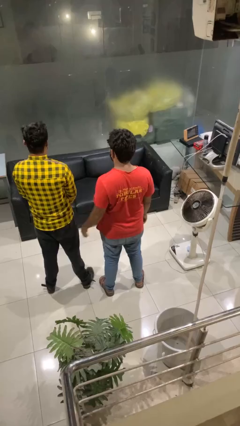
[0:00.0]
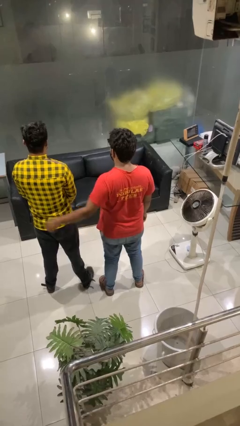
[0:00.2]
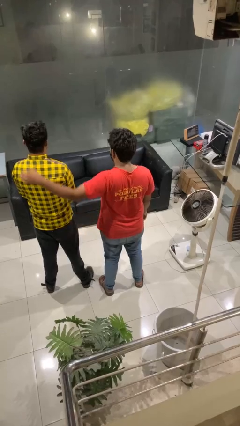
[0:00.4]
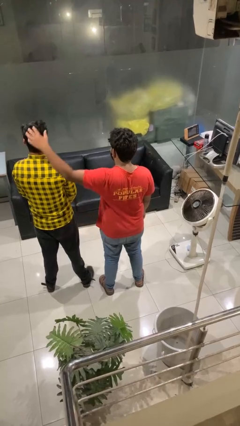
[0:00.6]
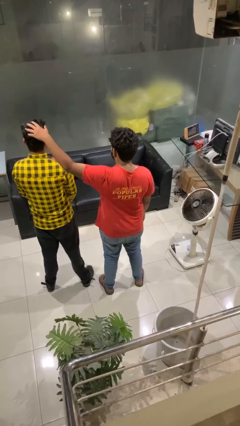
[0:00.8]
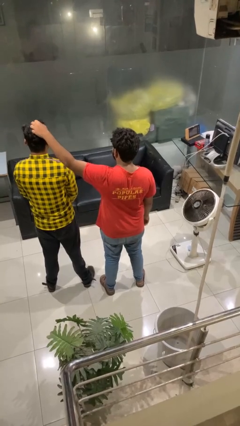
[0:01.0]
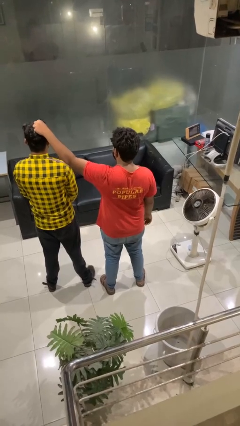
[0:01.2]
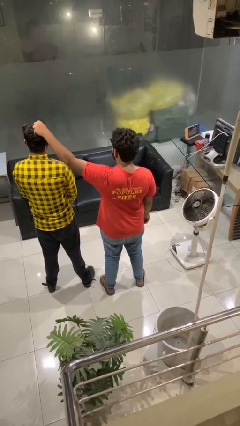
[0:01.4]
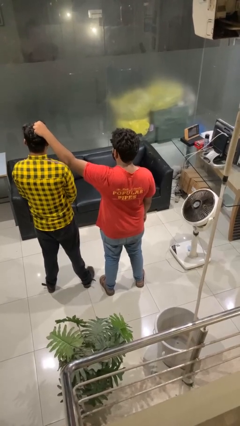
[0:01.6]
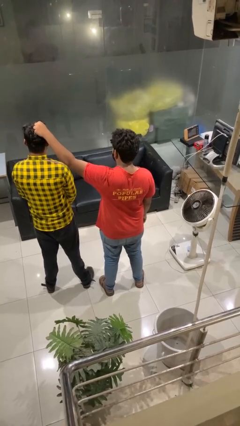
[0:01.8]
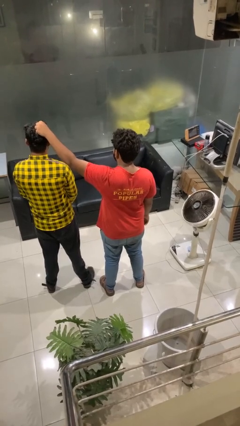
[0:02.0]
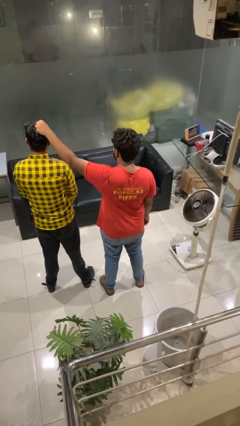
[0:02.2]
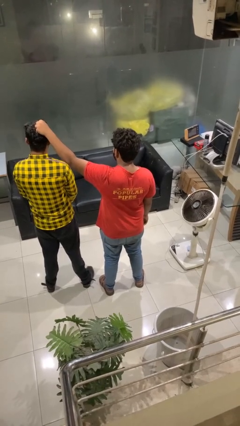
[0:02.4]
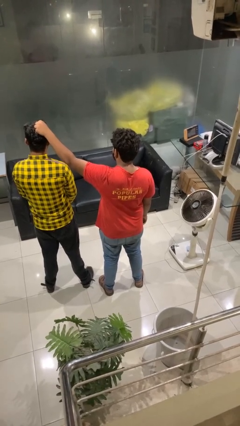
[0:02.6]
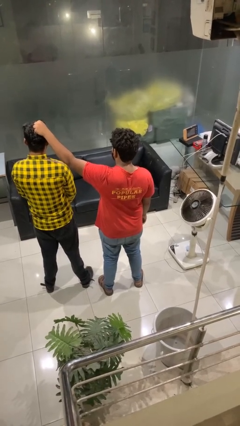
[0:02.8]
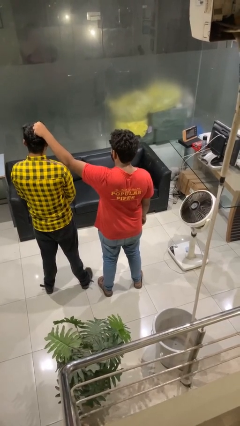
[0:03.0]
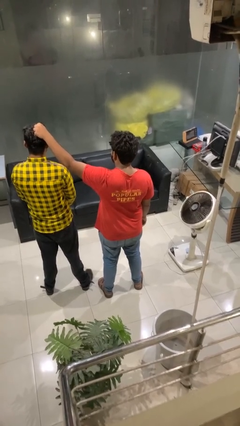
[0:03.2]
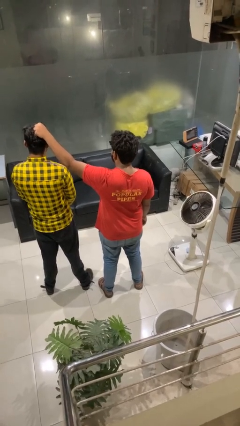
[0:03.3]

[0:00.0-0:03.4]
person grabs person by hair

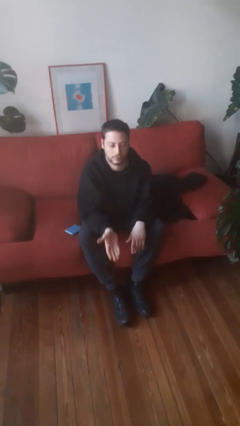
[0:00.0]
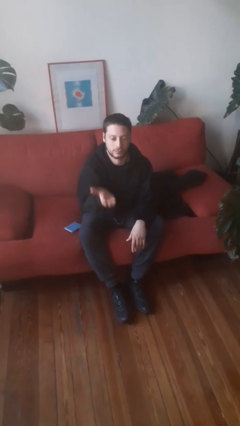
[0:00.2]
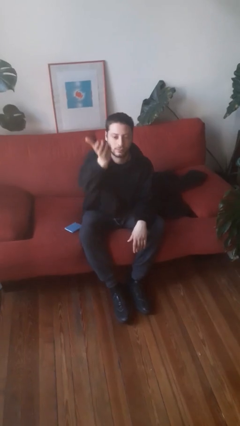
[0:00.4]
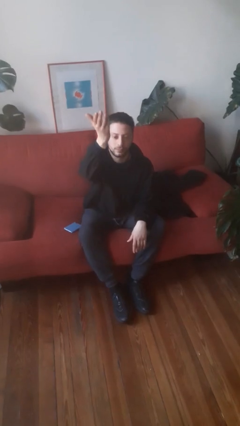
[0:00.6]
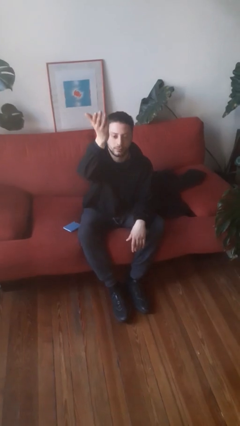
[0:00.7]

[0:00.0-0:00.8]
person gestures swipe up

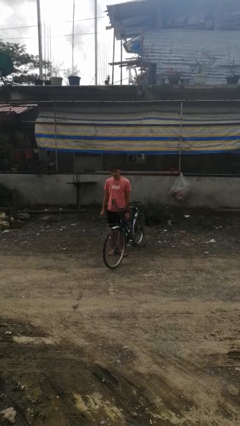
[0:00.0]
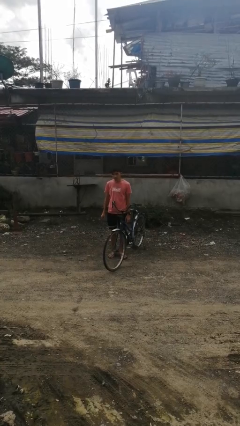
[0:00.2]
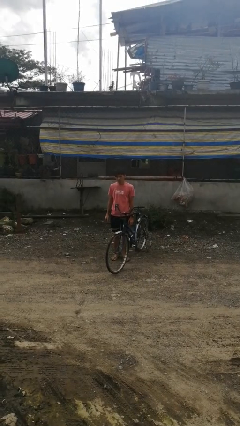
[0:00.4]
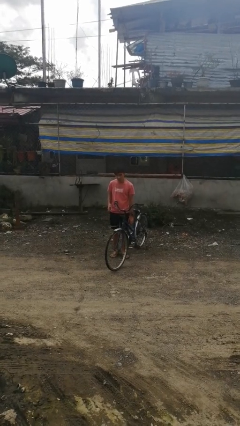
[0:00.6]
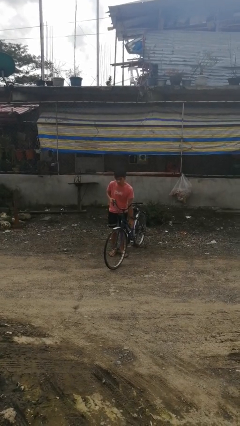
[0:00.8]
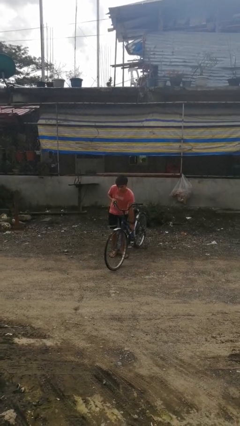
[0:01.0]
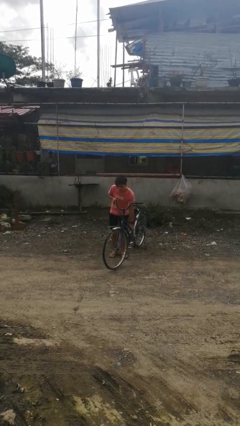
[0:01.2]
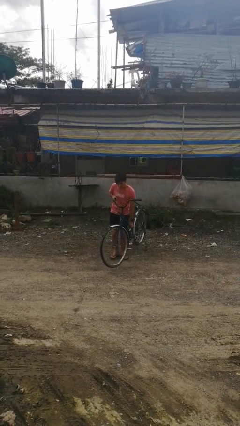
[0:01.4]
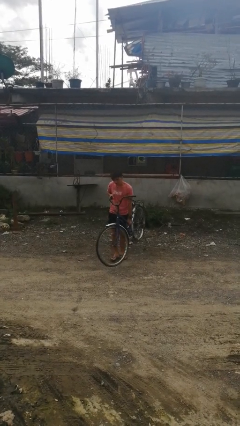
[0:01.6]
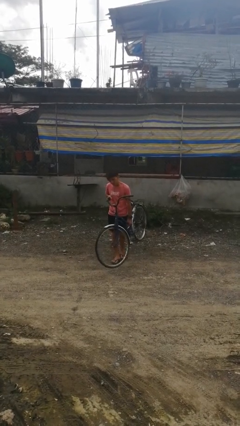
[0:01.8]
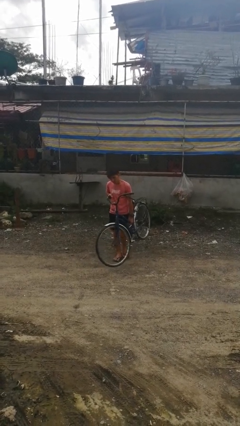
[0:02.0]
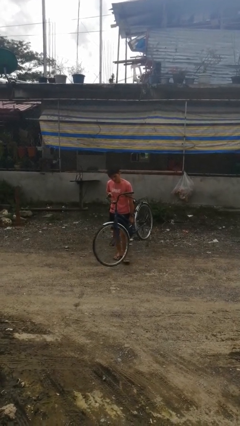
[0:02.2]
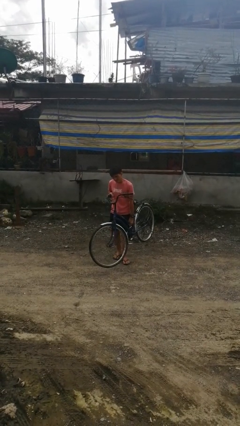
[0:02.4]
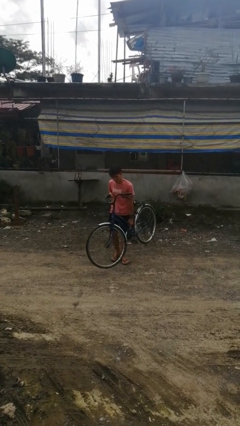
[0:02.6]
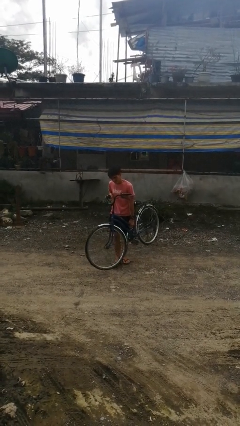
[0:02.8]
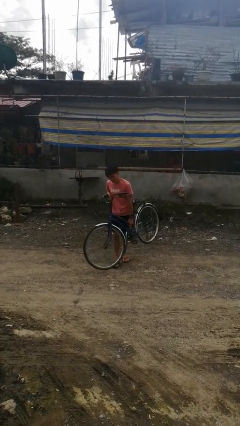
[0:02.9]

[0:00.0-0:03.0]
person carries bicycle

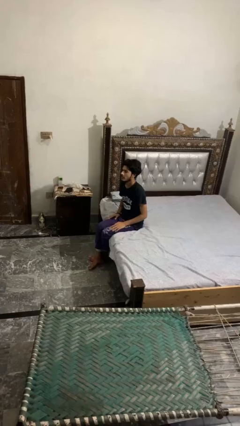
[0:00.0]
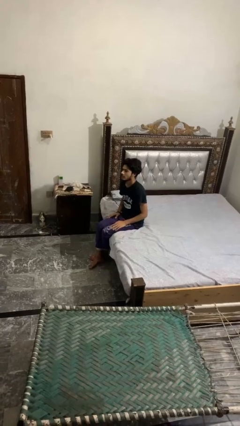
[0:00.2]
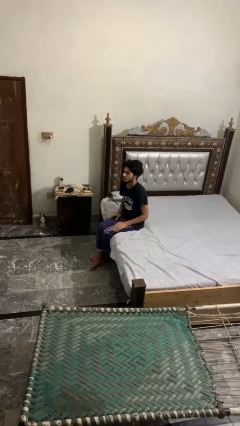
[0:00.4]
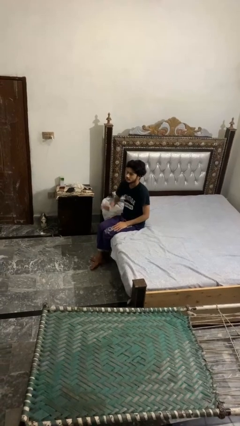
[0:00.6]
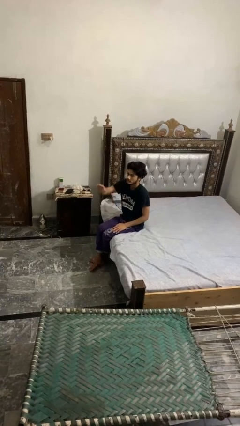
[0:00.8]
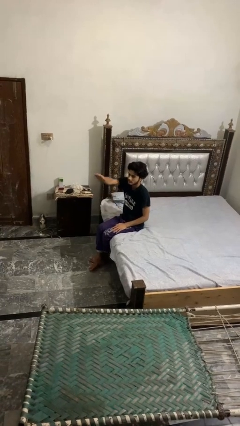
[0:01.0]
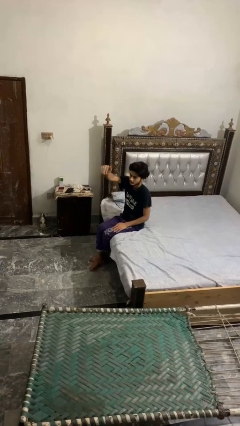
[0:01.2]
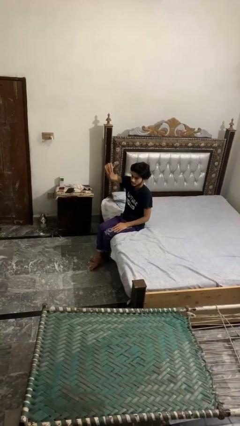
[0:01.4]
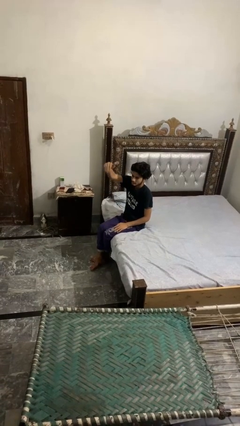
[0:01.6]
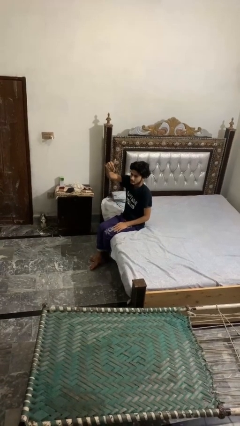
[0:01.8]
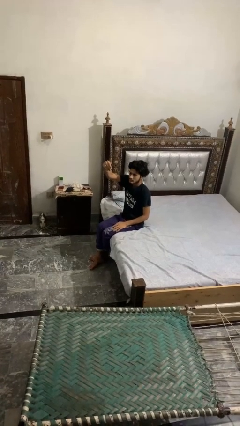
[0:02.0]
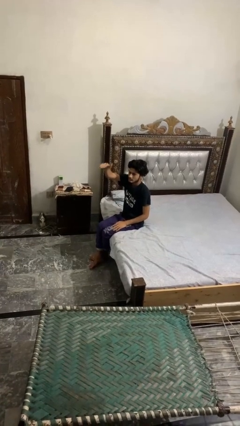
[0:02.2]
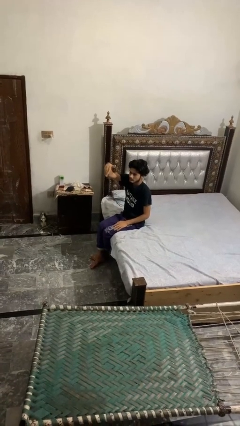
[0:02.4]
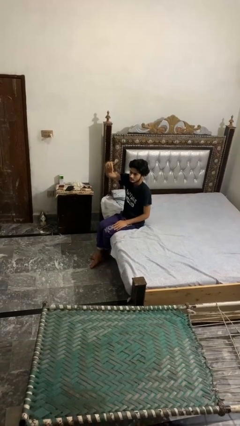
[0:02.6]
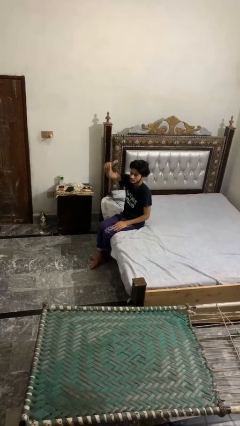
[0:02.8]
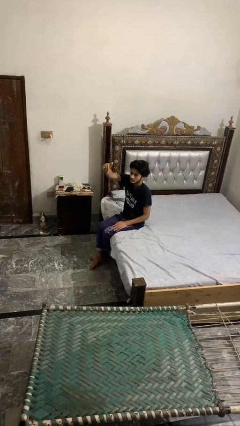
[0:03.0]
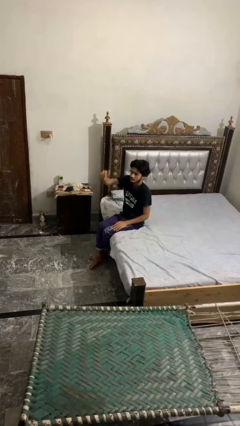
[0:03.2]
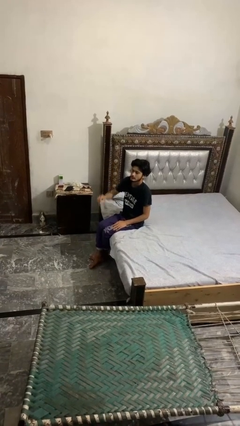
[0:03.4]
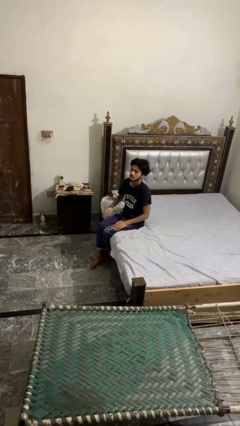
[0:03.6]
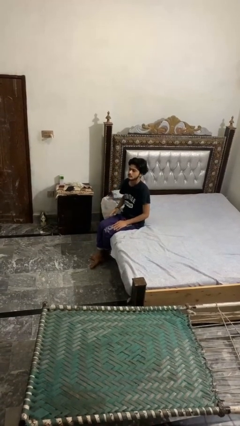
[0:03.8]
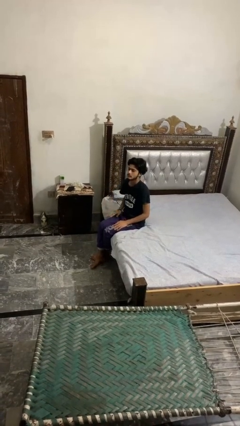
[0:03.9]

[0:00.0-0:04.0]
person gestures come here

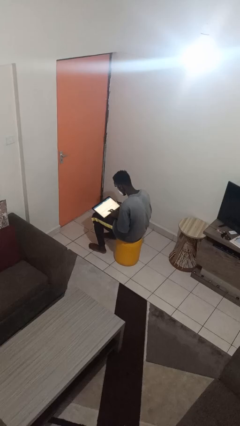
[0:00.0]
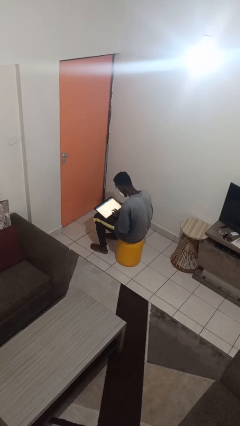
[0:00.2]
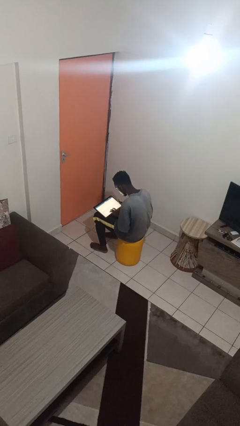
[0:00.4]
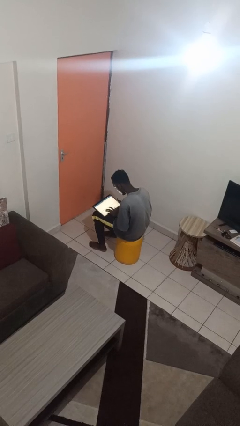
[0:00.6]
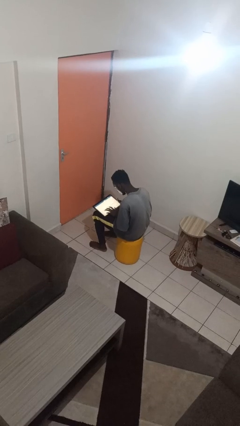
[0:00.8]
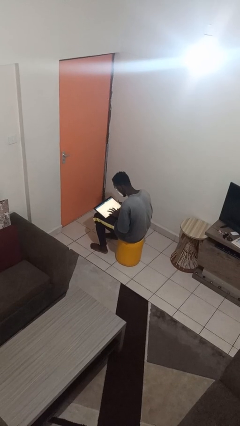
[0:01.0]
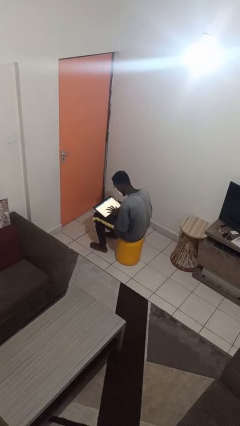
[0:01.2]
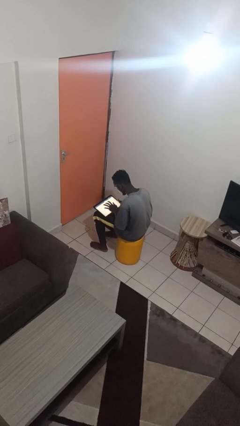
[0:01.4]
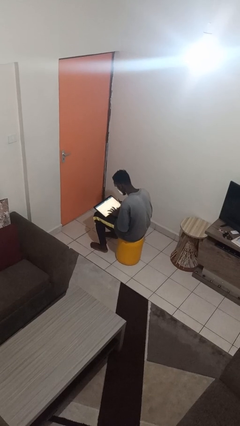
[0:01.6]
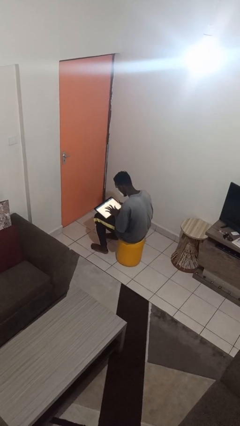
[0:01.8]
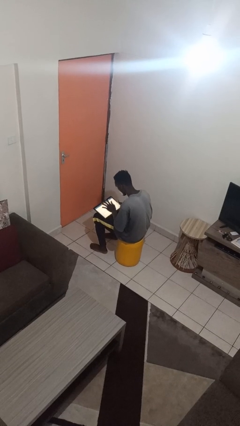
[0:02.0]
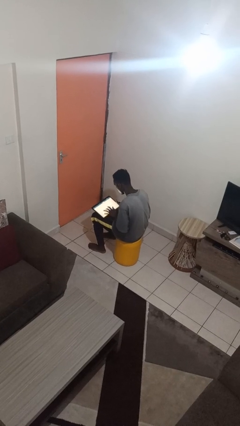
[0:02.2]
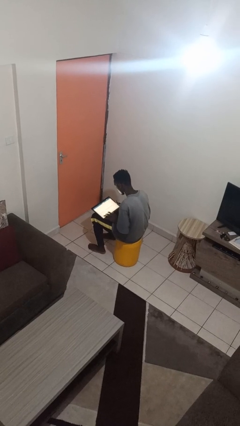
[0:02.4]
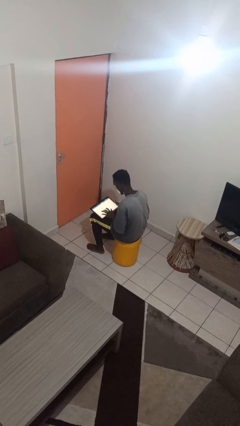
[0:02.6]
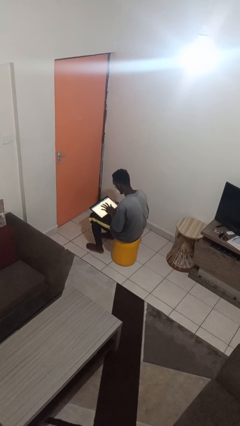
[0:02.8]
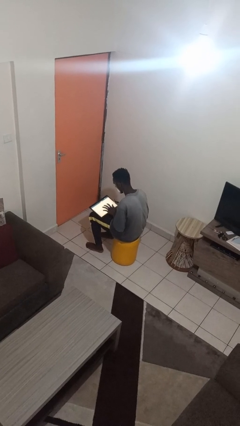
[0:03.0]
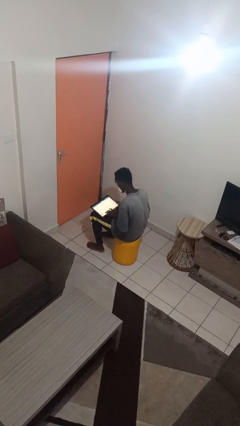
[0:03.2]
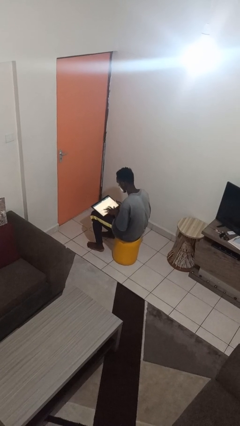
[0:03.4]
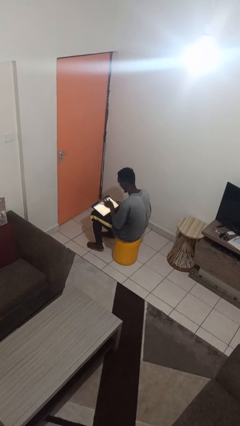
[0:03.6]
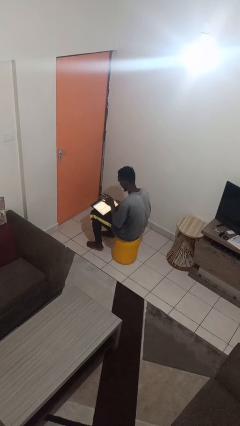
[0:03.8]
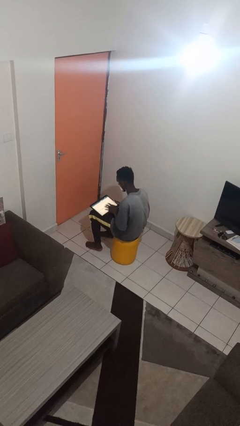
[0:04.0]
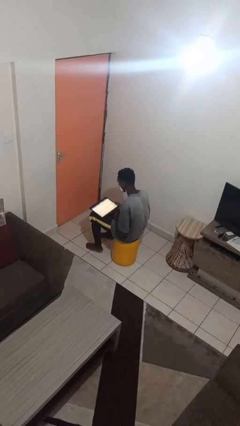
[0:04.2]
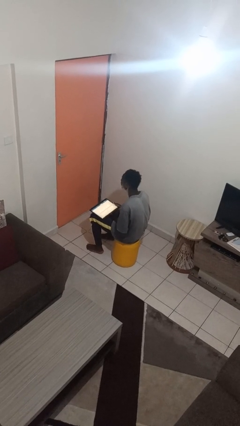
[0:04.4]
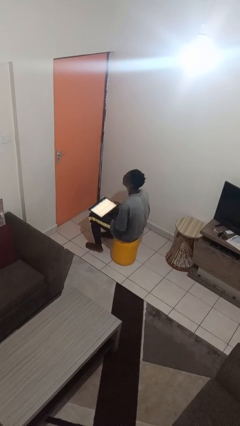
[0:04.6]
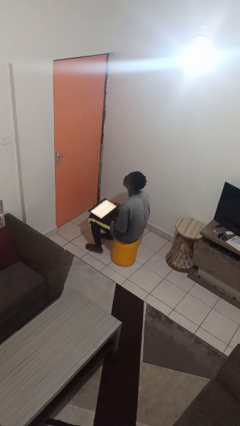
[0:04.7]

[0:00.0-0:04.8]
person interacts with tablet

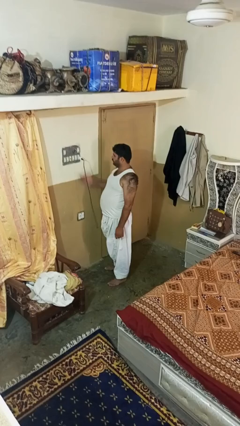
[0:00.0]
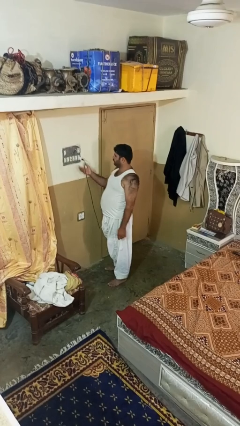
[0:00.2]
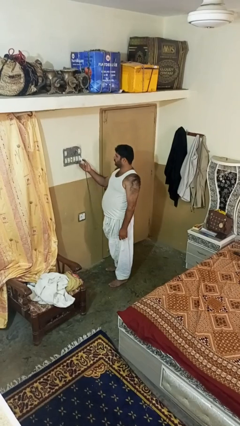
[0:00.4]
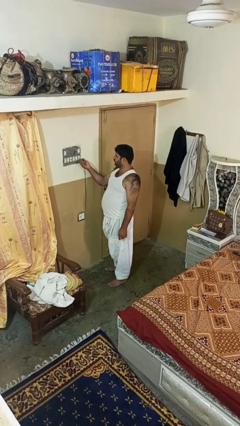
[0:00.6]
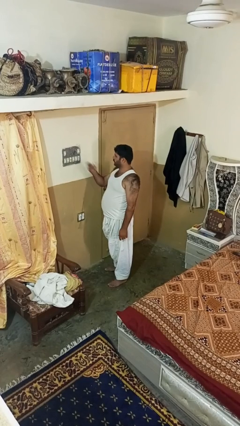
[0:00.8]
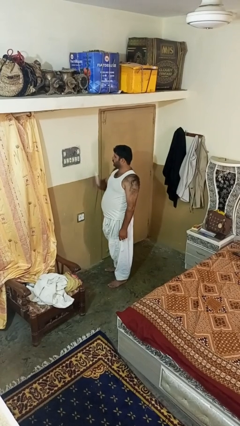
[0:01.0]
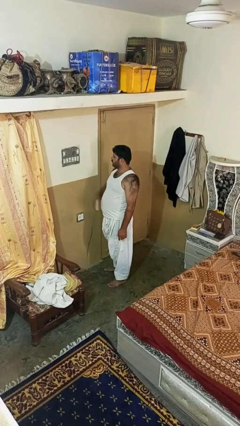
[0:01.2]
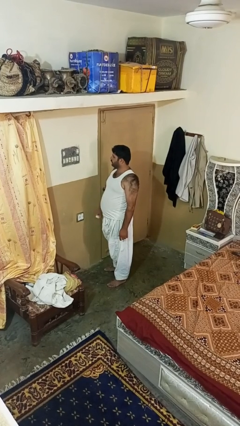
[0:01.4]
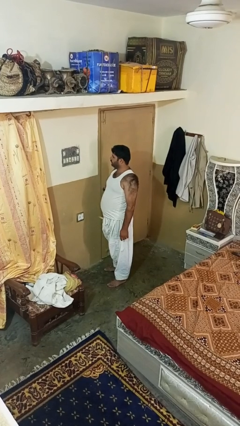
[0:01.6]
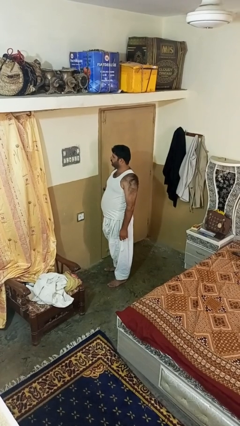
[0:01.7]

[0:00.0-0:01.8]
person unplugs from electrical socket
